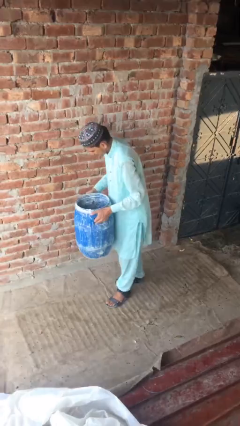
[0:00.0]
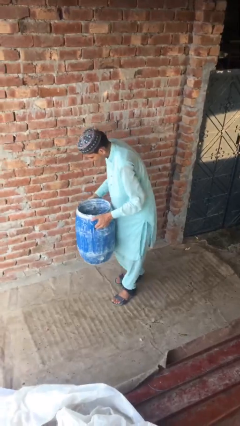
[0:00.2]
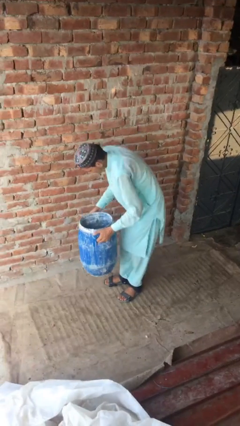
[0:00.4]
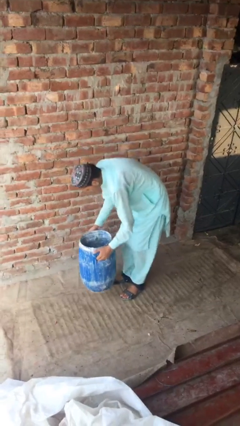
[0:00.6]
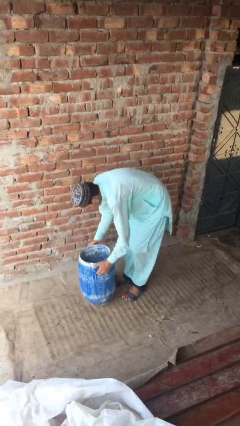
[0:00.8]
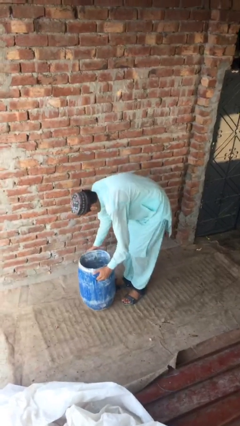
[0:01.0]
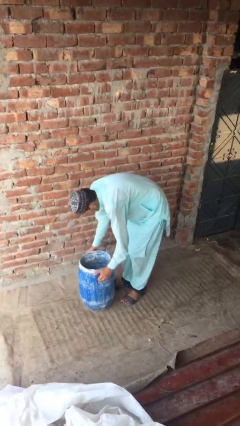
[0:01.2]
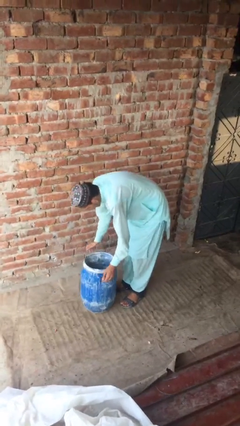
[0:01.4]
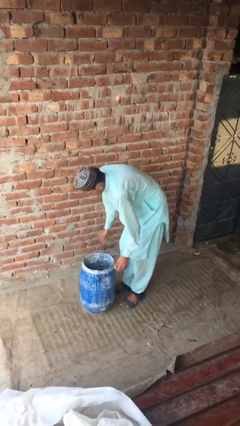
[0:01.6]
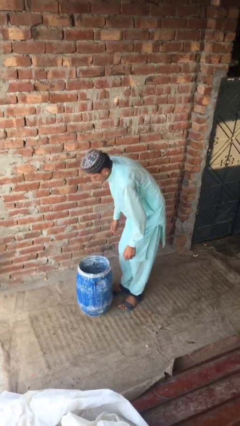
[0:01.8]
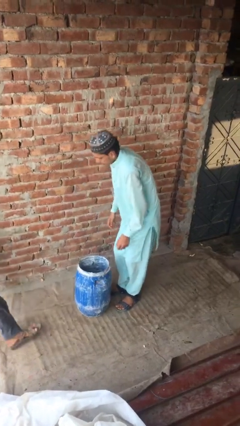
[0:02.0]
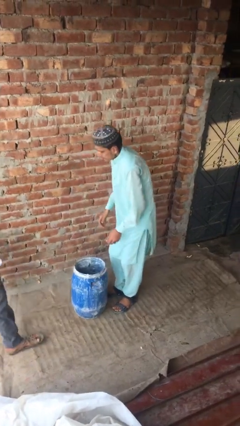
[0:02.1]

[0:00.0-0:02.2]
person puts down object on floor

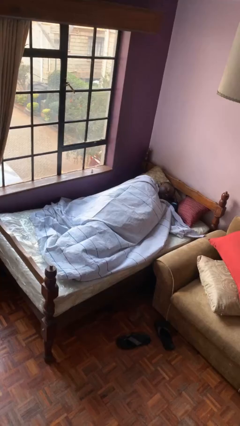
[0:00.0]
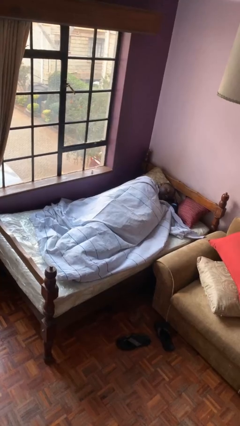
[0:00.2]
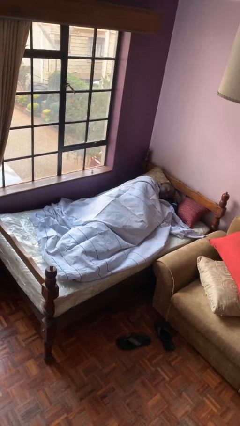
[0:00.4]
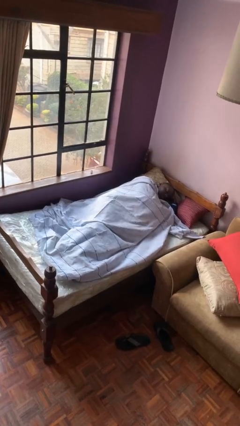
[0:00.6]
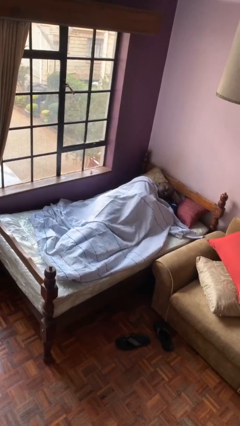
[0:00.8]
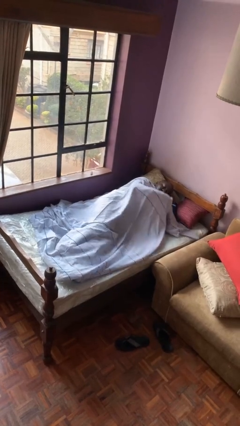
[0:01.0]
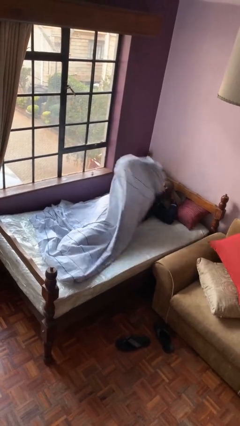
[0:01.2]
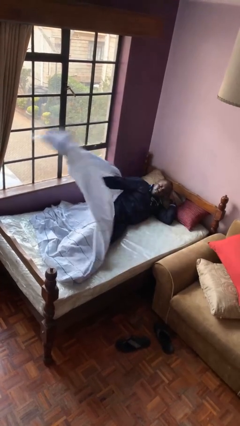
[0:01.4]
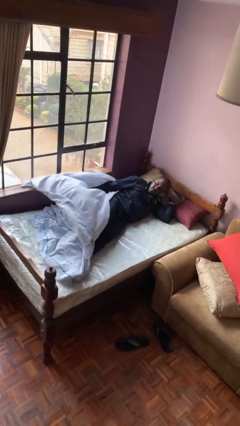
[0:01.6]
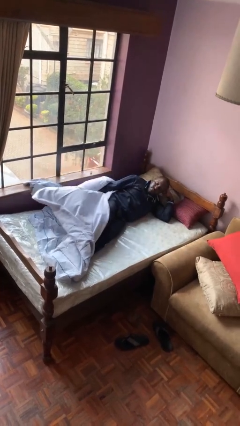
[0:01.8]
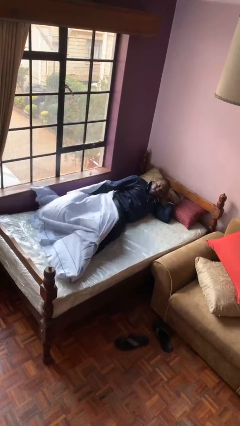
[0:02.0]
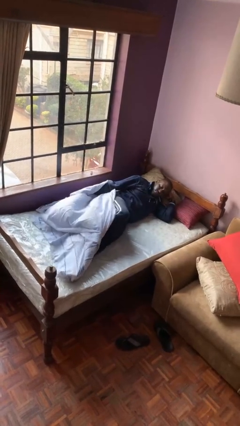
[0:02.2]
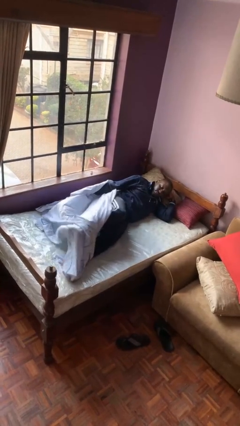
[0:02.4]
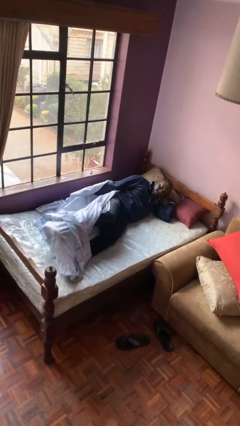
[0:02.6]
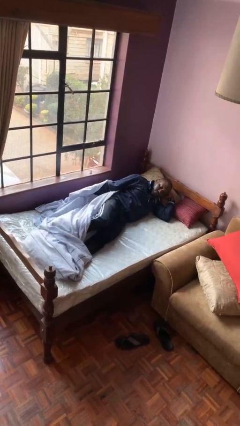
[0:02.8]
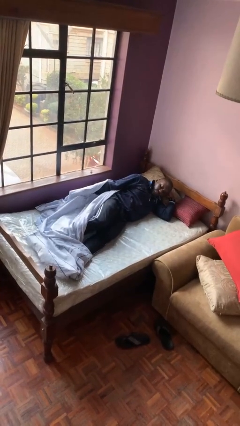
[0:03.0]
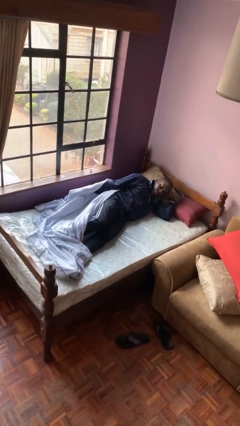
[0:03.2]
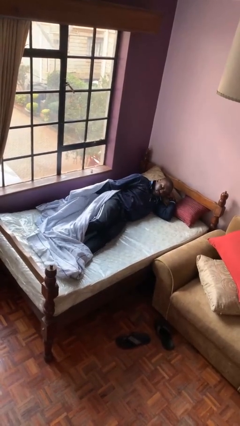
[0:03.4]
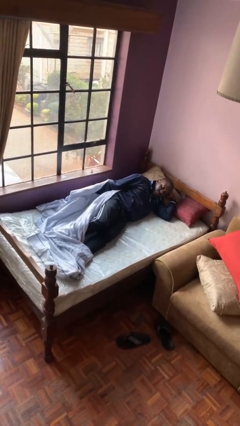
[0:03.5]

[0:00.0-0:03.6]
person uncovers with bedsheets

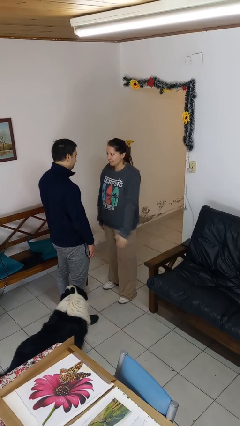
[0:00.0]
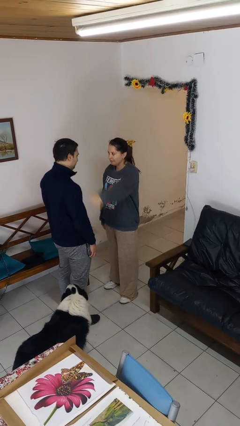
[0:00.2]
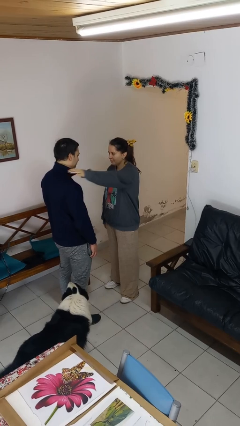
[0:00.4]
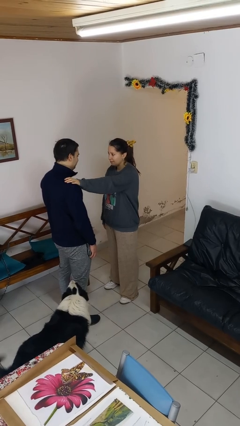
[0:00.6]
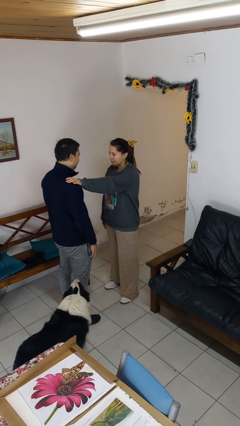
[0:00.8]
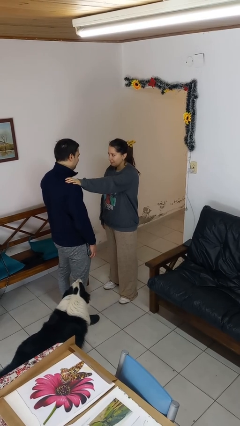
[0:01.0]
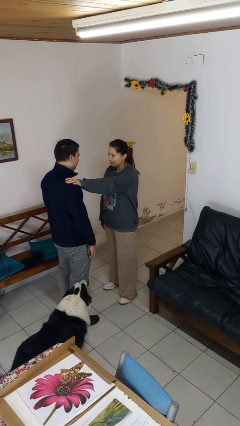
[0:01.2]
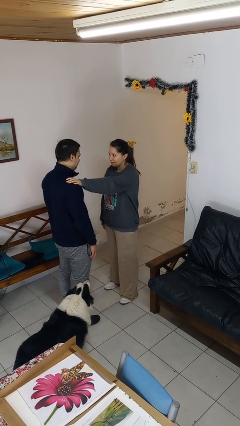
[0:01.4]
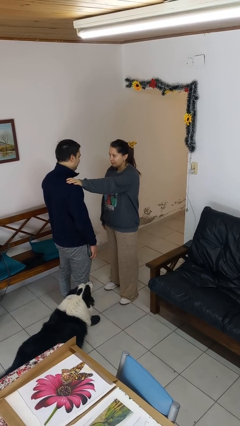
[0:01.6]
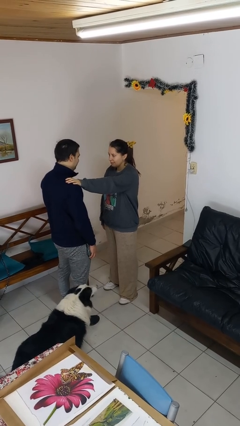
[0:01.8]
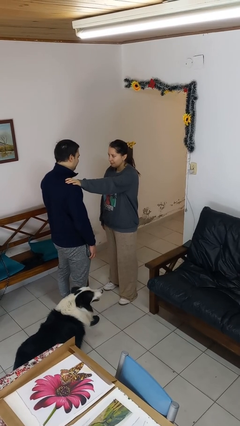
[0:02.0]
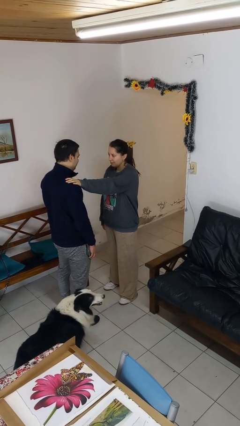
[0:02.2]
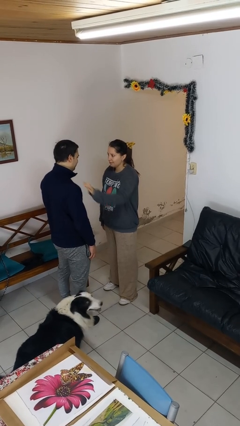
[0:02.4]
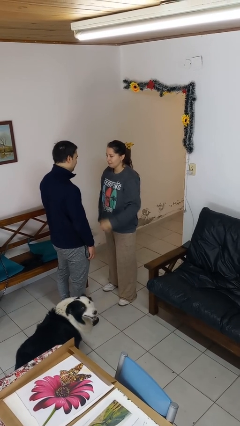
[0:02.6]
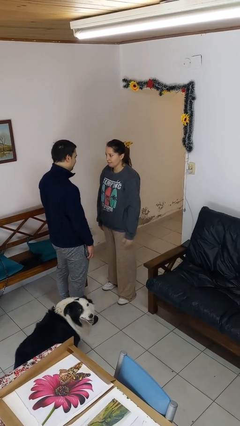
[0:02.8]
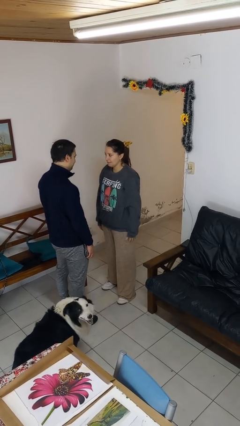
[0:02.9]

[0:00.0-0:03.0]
person pounds shoulders of person

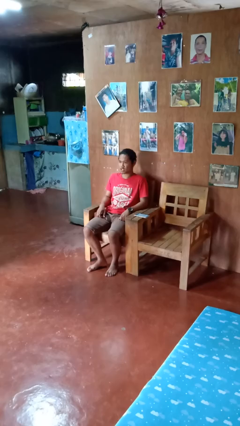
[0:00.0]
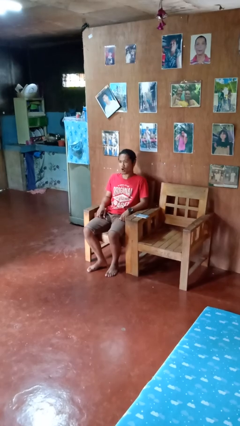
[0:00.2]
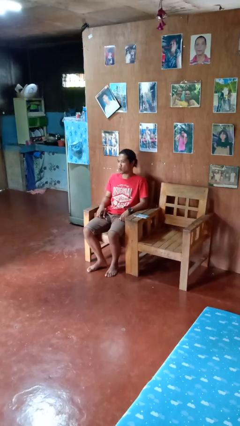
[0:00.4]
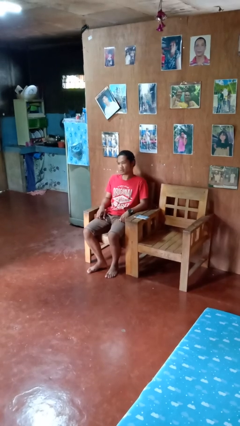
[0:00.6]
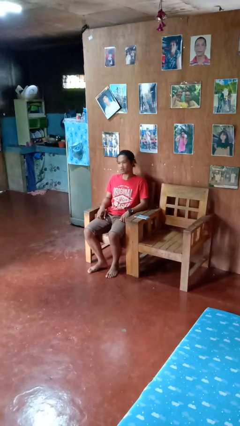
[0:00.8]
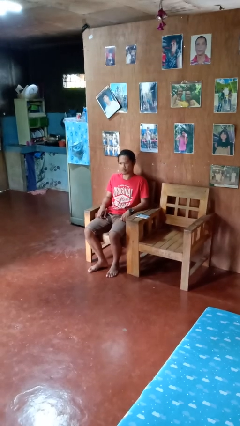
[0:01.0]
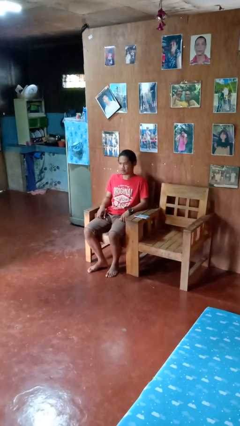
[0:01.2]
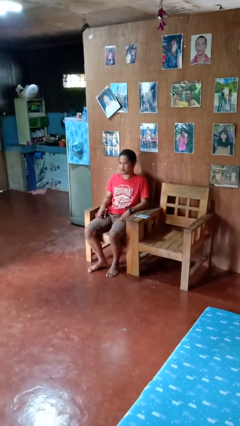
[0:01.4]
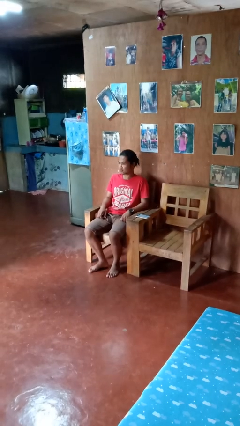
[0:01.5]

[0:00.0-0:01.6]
person shakes head

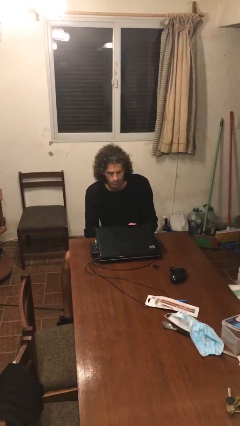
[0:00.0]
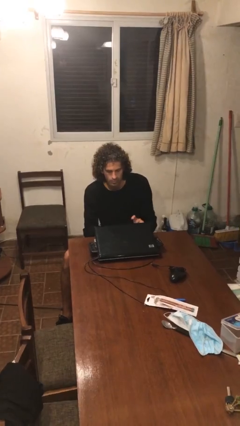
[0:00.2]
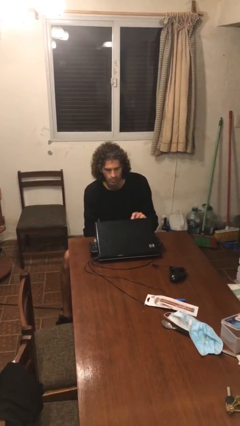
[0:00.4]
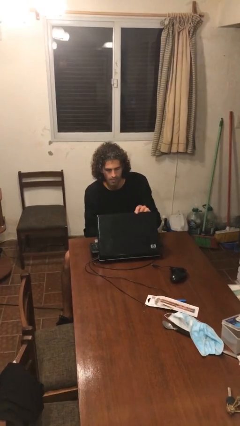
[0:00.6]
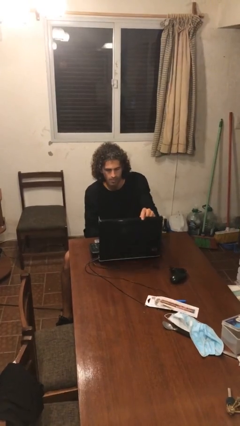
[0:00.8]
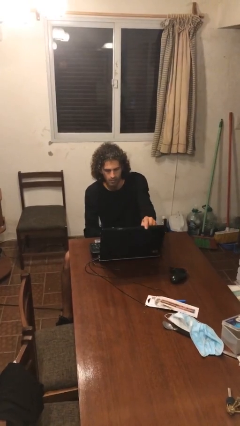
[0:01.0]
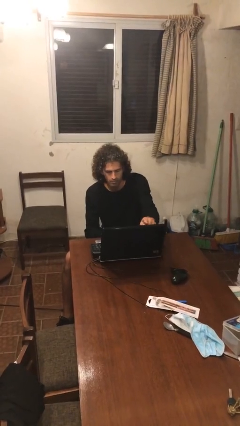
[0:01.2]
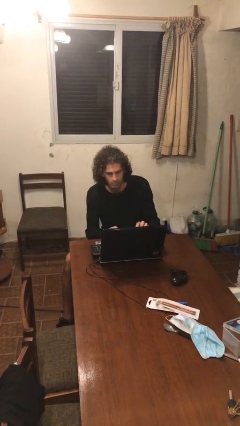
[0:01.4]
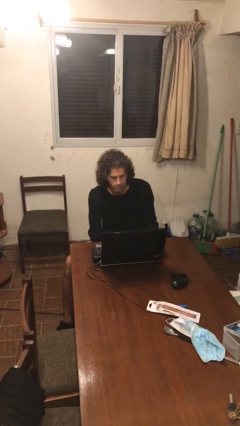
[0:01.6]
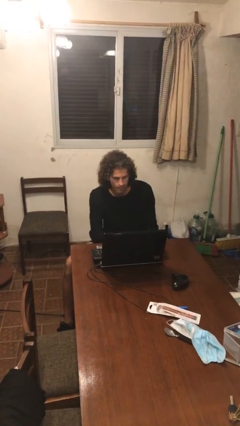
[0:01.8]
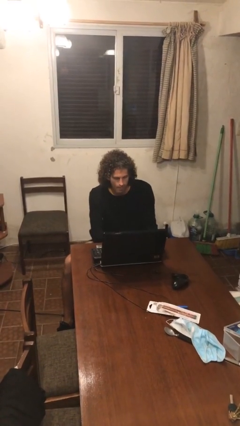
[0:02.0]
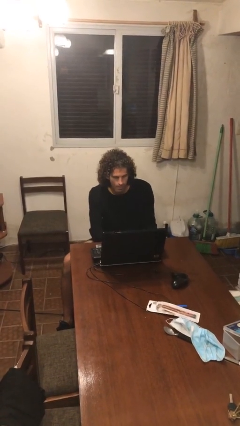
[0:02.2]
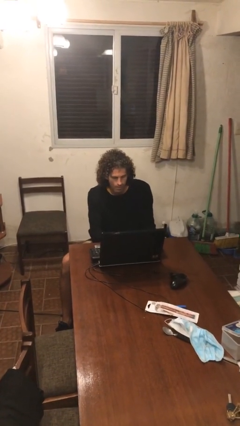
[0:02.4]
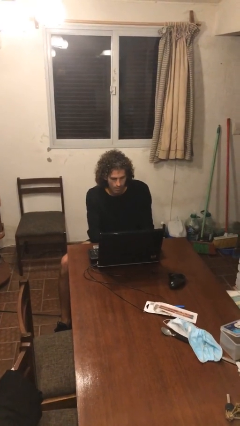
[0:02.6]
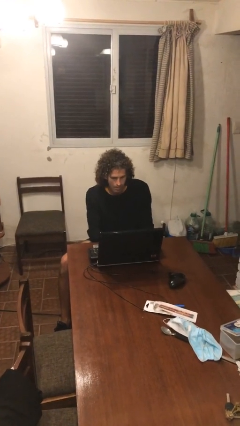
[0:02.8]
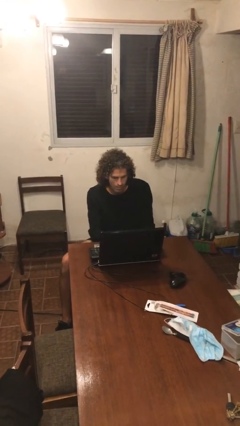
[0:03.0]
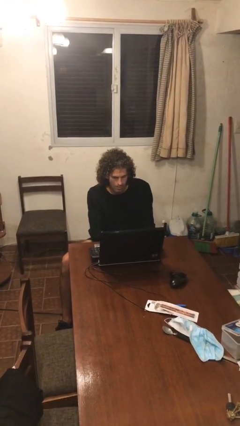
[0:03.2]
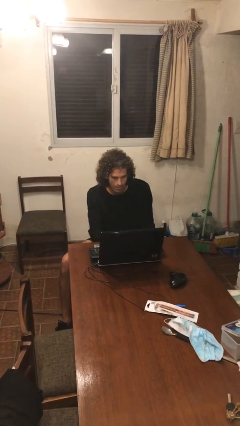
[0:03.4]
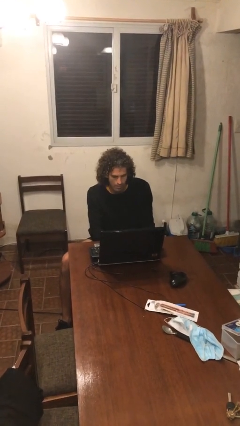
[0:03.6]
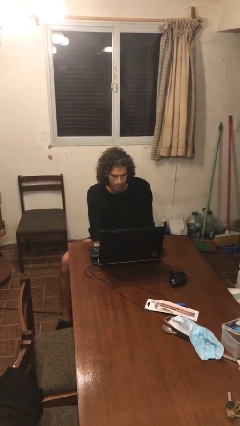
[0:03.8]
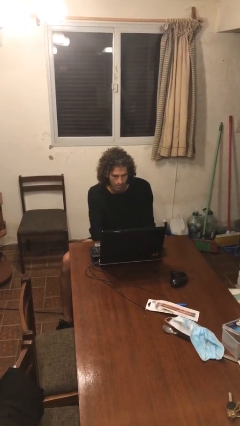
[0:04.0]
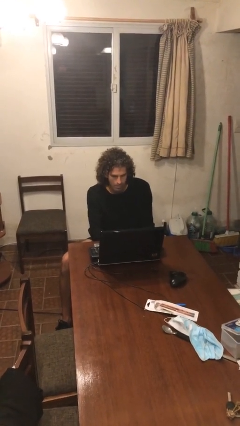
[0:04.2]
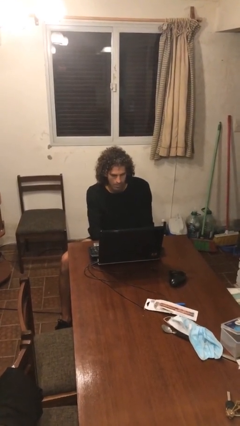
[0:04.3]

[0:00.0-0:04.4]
person interacts with laptop

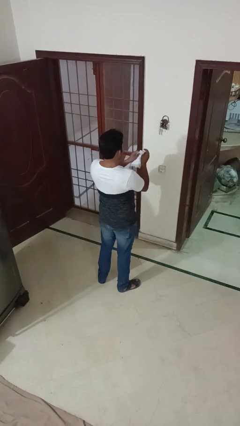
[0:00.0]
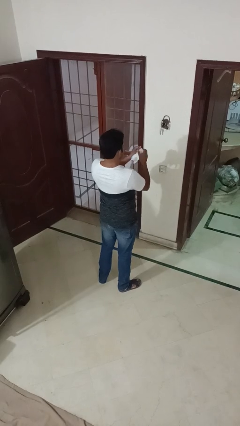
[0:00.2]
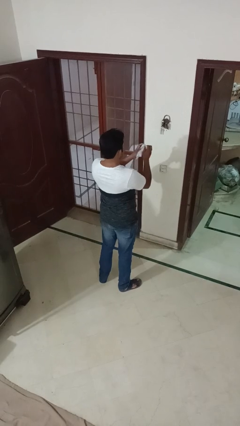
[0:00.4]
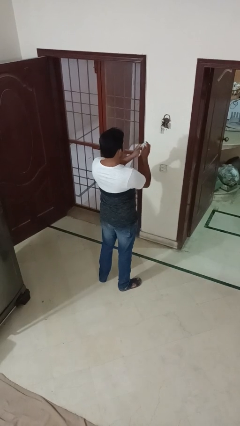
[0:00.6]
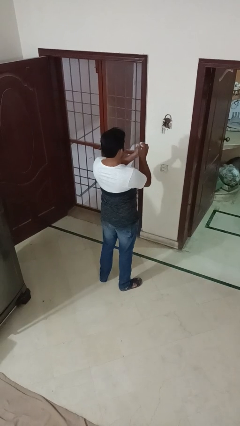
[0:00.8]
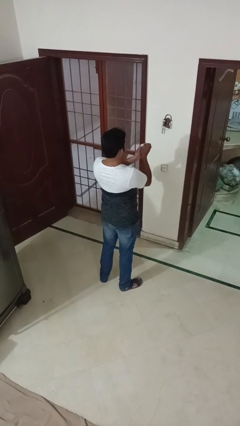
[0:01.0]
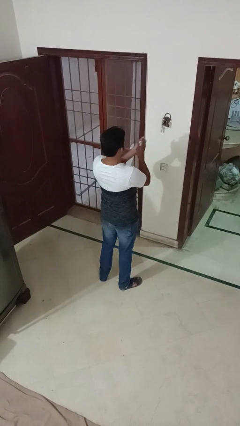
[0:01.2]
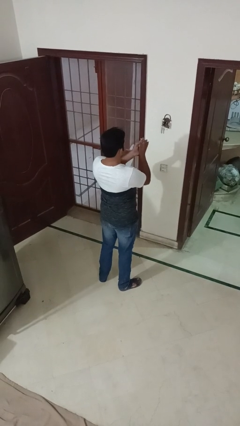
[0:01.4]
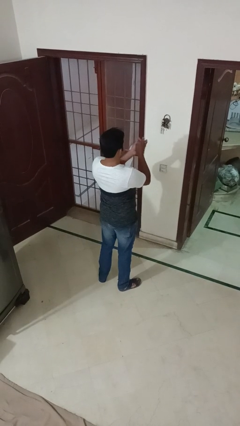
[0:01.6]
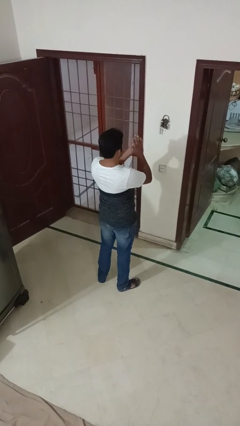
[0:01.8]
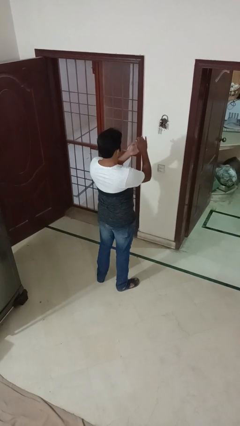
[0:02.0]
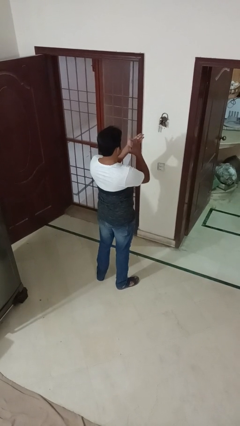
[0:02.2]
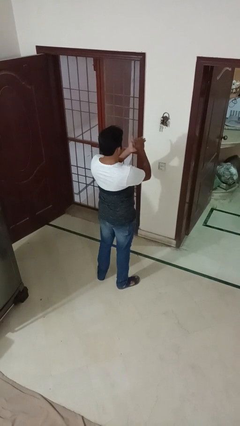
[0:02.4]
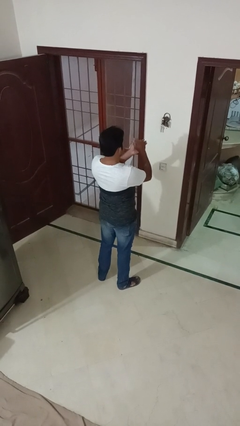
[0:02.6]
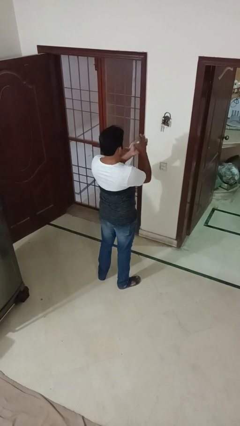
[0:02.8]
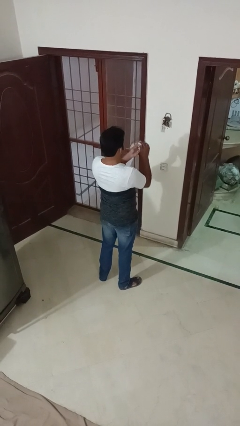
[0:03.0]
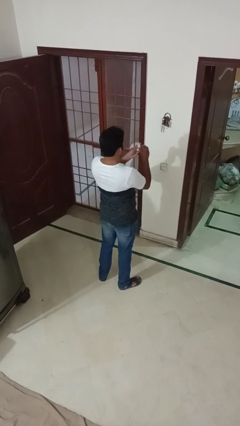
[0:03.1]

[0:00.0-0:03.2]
person crumples paper
